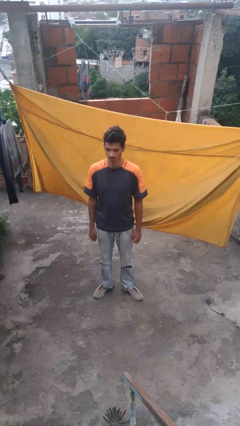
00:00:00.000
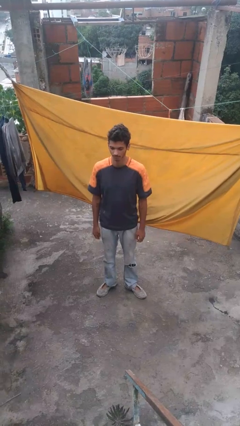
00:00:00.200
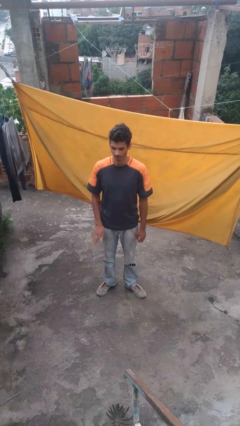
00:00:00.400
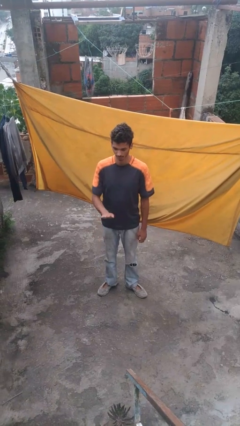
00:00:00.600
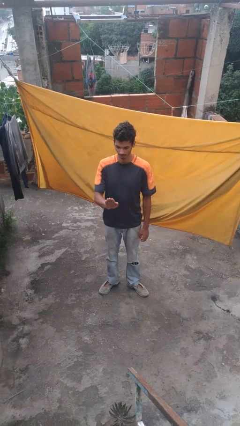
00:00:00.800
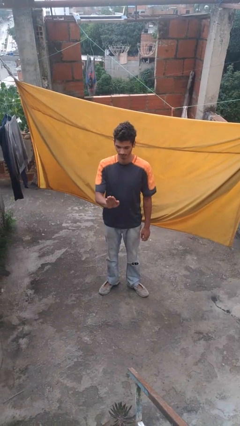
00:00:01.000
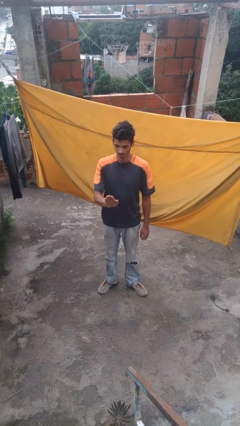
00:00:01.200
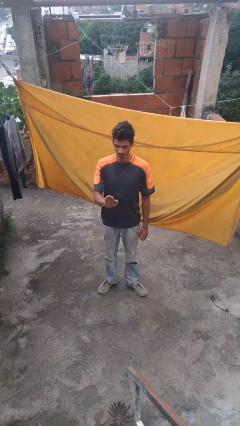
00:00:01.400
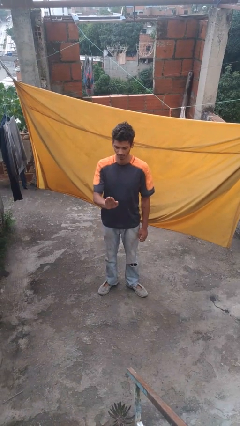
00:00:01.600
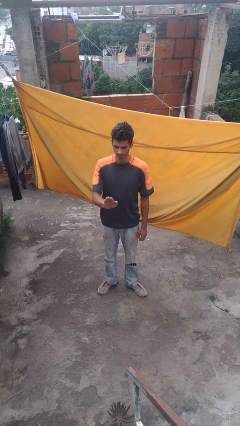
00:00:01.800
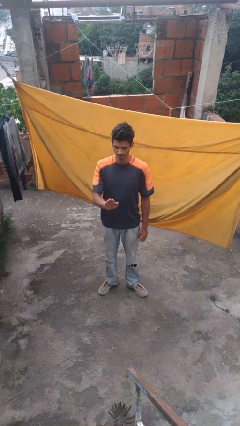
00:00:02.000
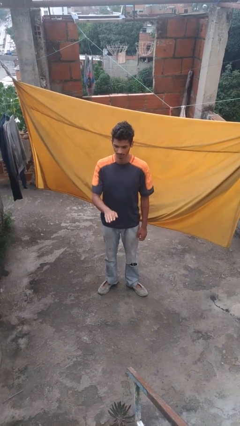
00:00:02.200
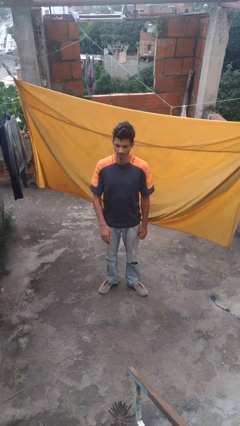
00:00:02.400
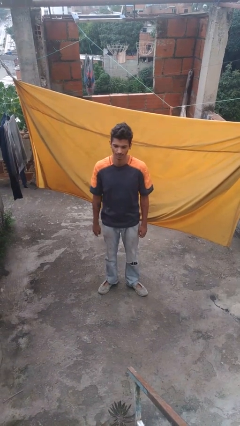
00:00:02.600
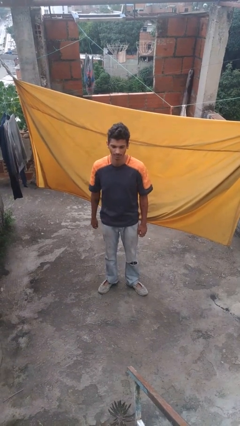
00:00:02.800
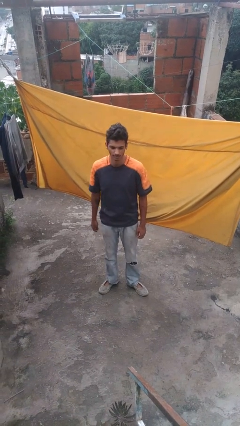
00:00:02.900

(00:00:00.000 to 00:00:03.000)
person gestures stop

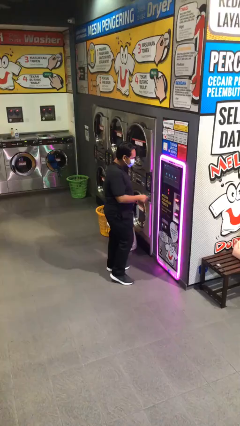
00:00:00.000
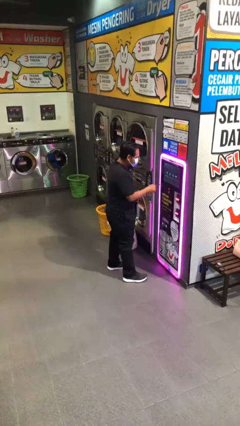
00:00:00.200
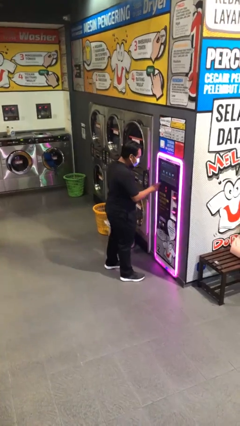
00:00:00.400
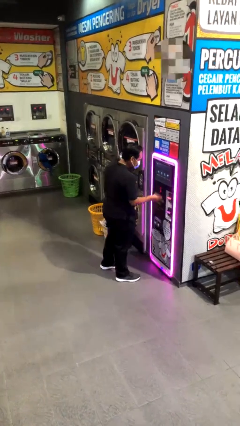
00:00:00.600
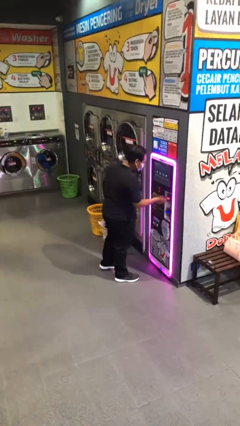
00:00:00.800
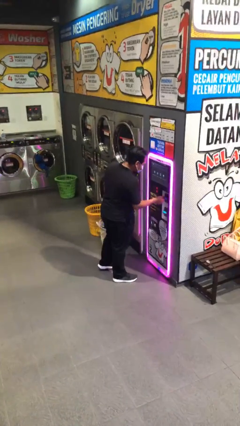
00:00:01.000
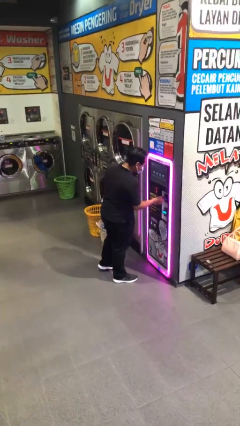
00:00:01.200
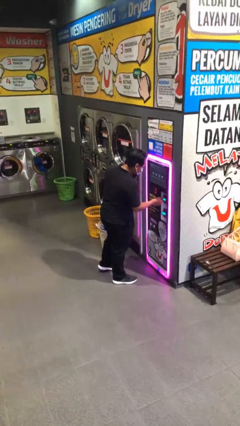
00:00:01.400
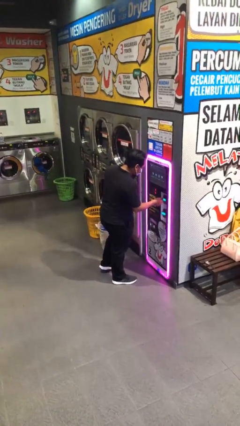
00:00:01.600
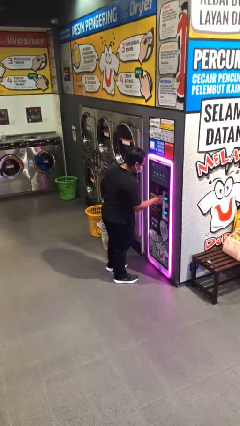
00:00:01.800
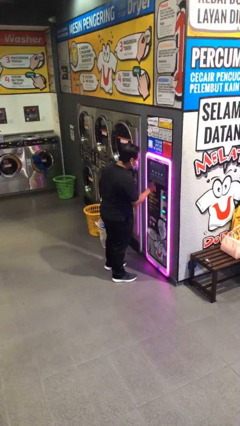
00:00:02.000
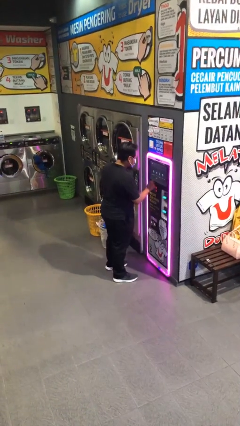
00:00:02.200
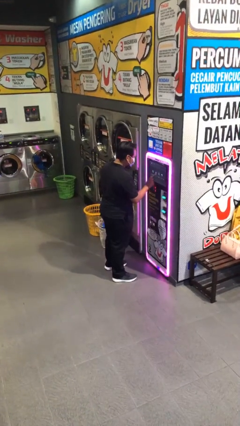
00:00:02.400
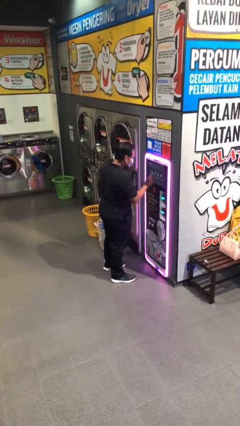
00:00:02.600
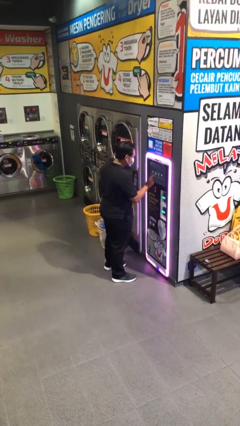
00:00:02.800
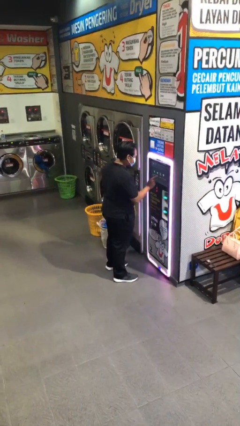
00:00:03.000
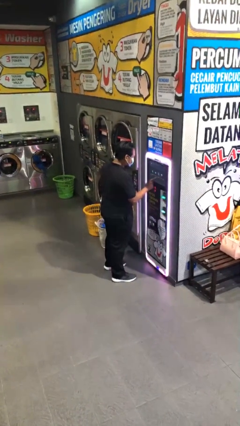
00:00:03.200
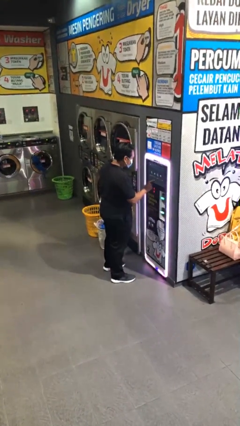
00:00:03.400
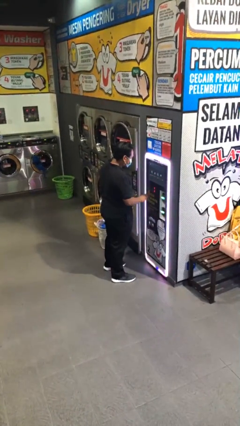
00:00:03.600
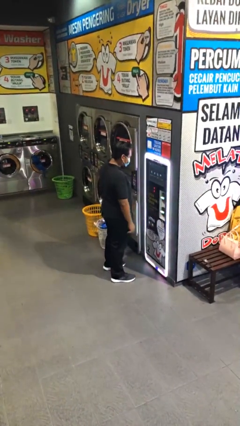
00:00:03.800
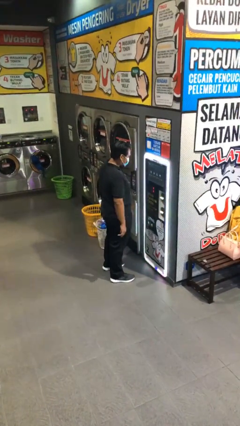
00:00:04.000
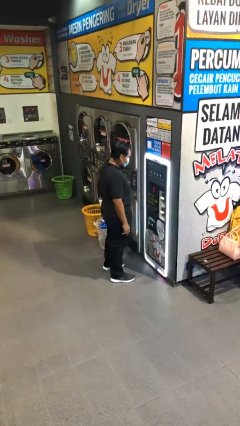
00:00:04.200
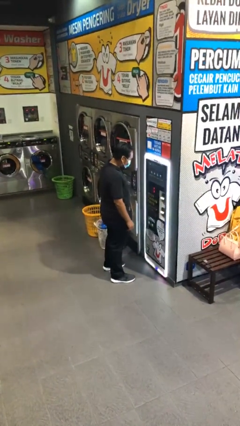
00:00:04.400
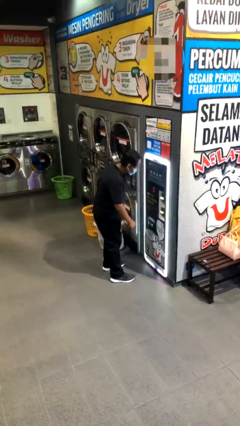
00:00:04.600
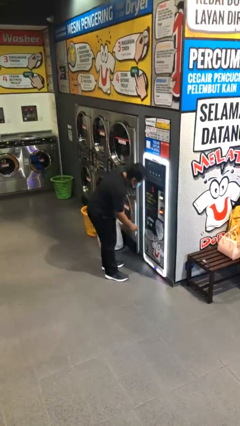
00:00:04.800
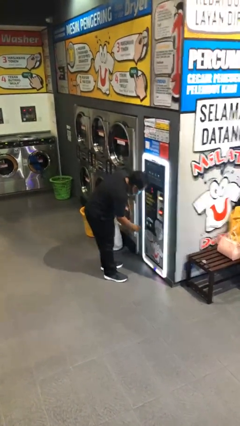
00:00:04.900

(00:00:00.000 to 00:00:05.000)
person purchases from machine

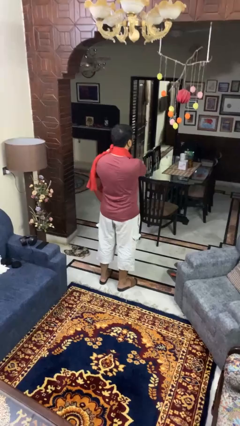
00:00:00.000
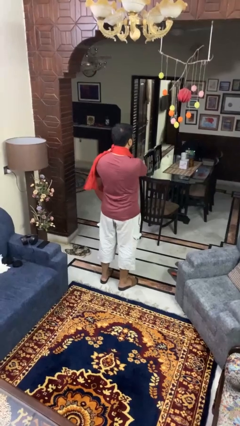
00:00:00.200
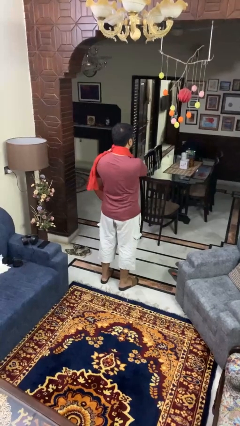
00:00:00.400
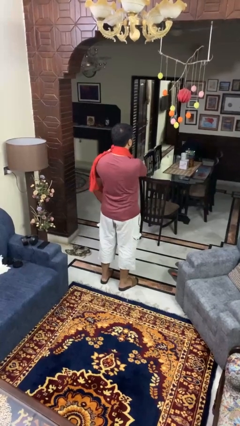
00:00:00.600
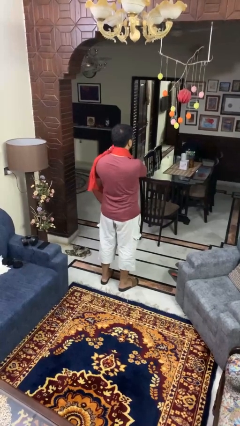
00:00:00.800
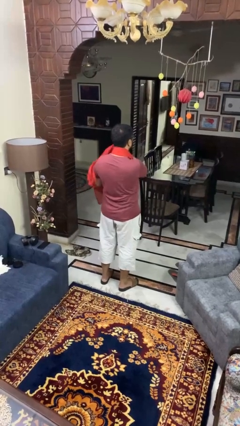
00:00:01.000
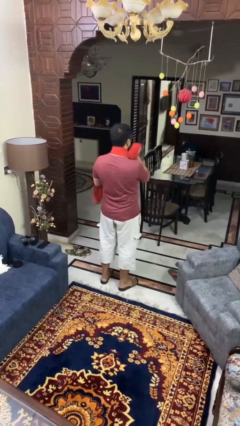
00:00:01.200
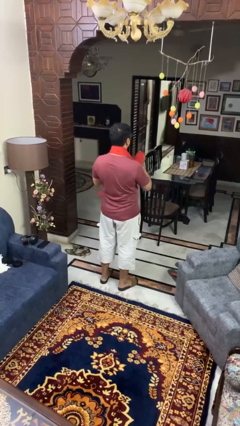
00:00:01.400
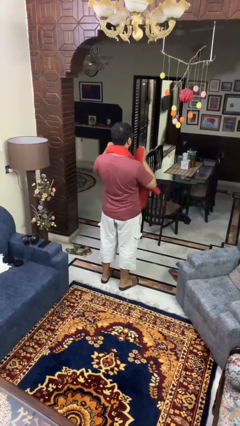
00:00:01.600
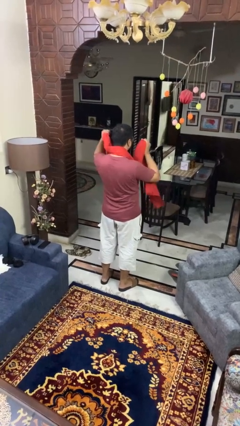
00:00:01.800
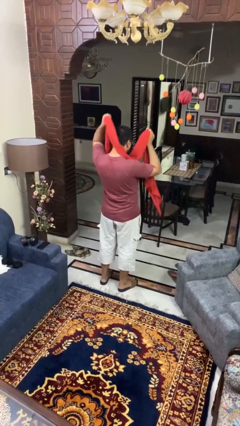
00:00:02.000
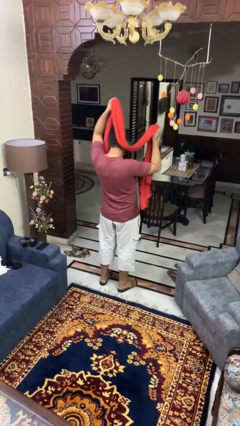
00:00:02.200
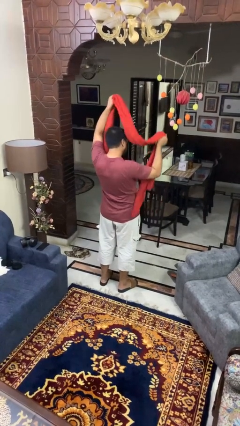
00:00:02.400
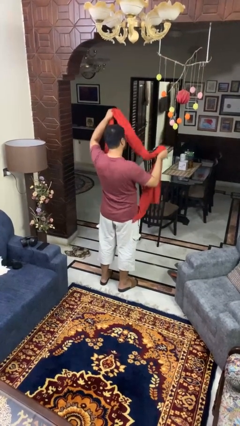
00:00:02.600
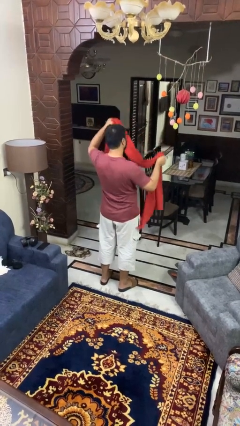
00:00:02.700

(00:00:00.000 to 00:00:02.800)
person takes off scarf

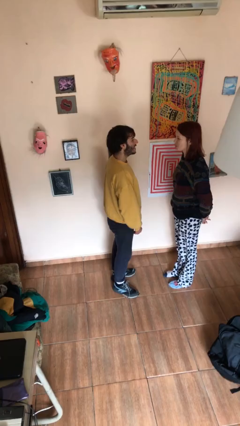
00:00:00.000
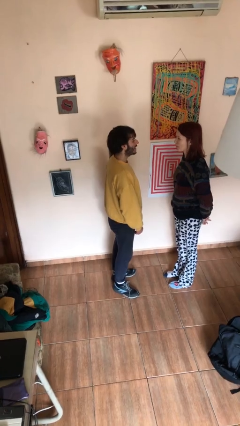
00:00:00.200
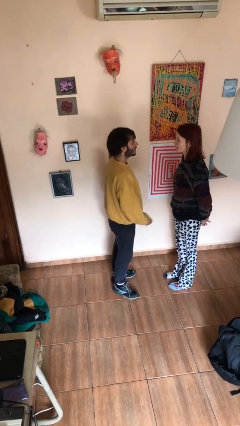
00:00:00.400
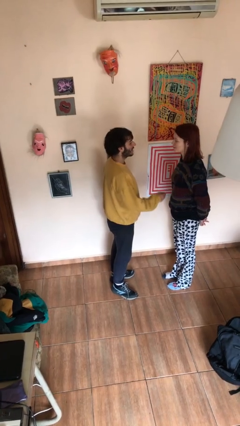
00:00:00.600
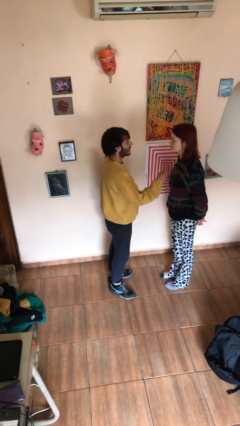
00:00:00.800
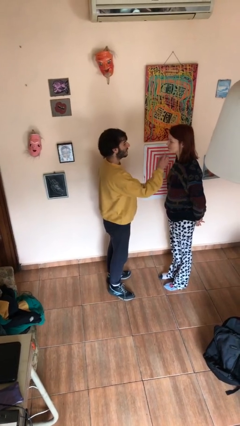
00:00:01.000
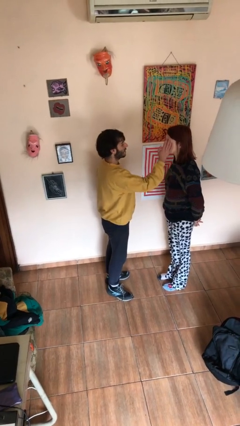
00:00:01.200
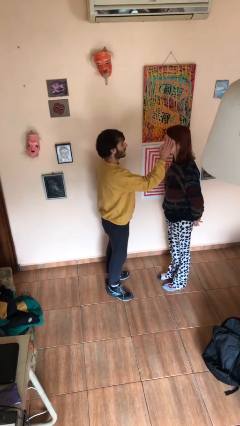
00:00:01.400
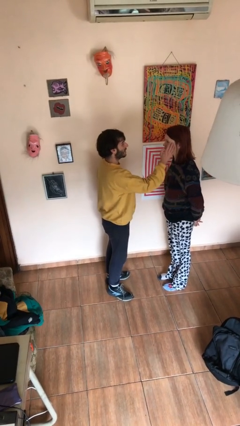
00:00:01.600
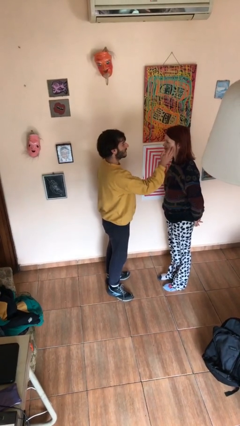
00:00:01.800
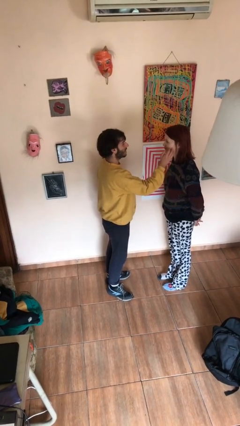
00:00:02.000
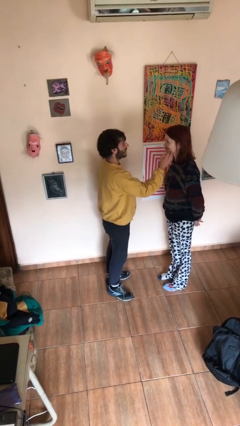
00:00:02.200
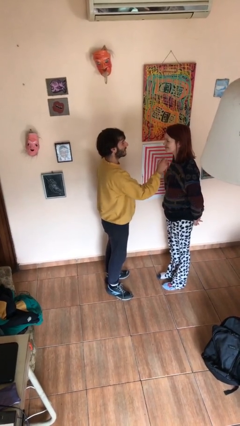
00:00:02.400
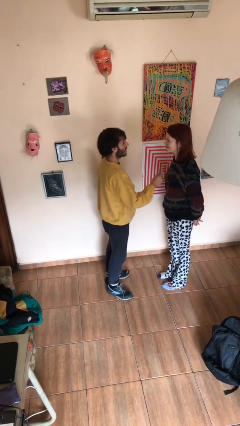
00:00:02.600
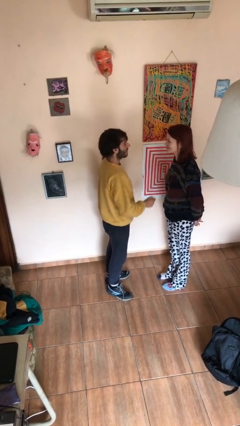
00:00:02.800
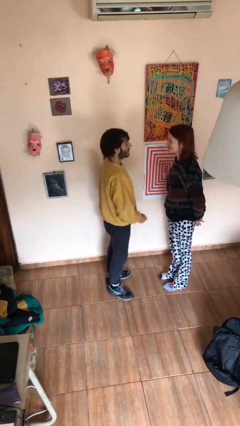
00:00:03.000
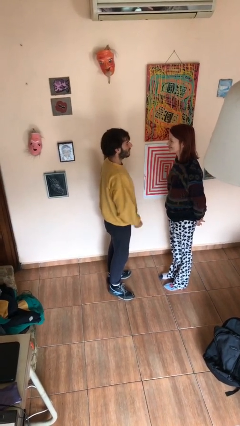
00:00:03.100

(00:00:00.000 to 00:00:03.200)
person touches face of person

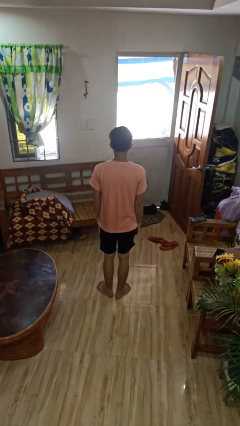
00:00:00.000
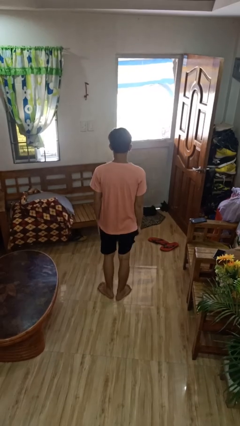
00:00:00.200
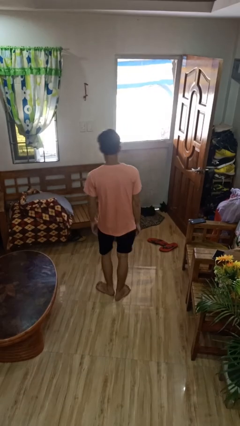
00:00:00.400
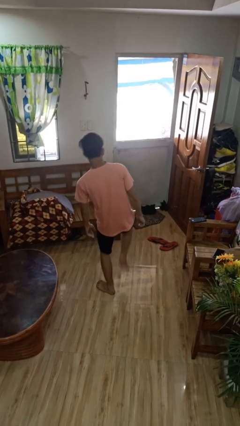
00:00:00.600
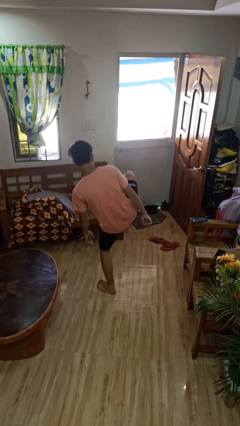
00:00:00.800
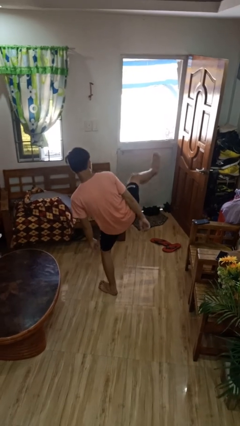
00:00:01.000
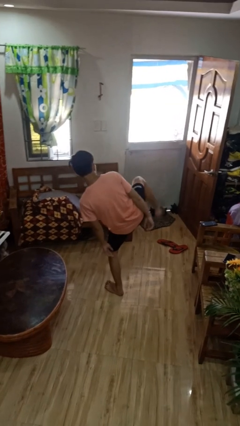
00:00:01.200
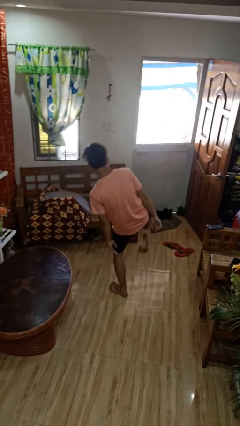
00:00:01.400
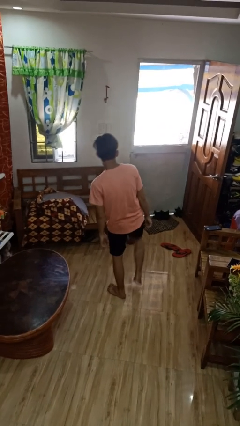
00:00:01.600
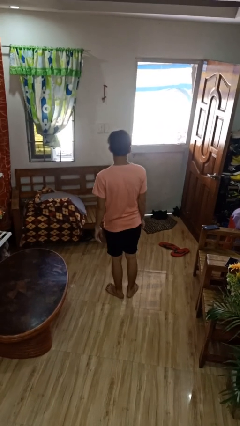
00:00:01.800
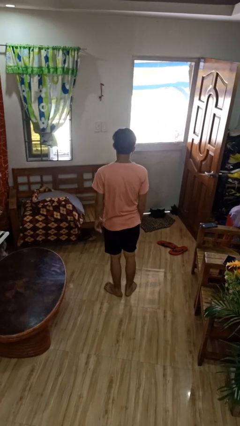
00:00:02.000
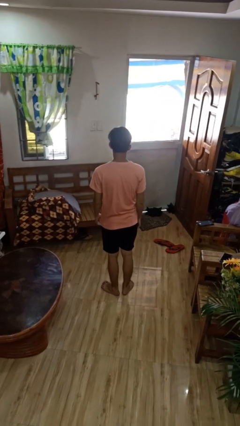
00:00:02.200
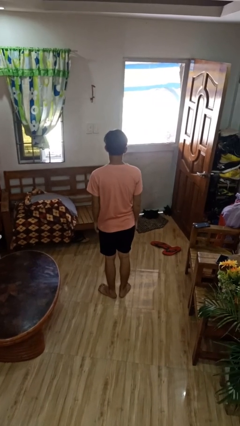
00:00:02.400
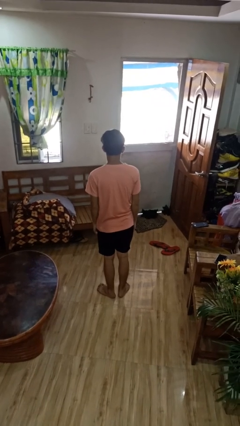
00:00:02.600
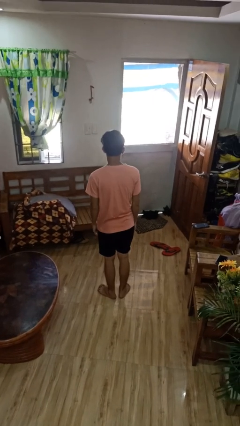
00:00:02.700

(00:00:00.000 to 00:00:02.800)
person karate kicks

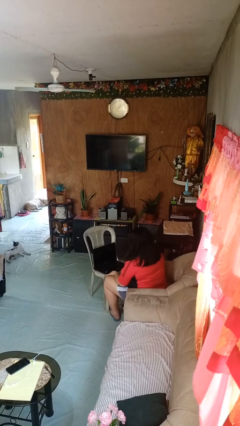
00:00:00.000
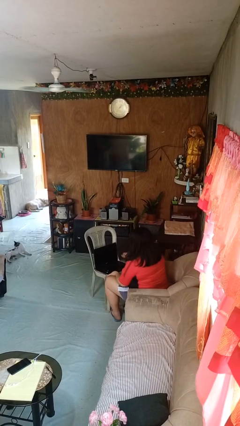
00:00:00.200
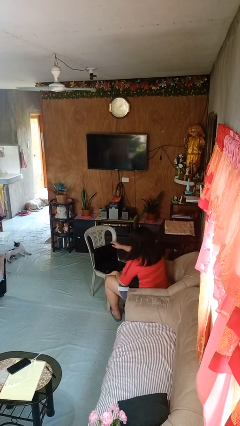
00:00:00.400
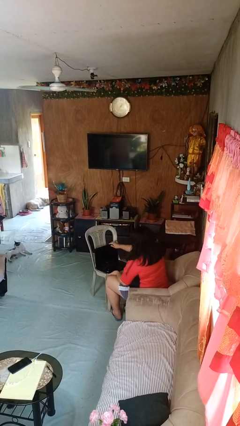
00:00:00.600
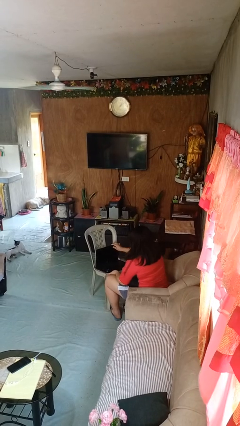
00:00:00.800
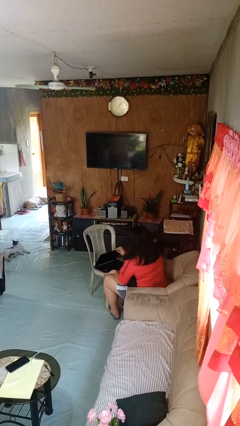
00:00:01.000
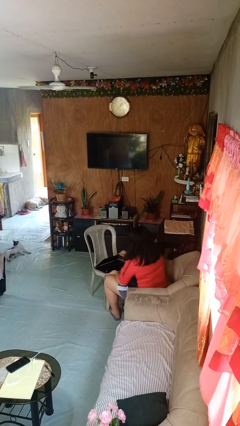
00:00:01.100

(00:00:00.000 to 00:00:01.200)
person closes laptop
